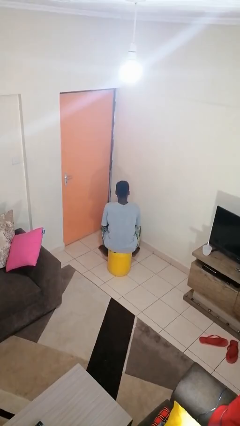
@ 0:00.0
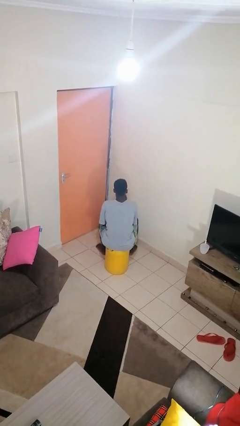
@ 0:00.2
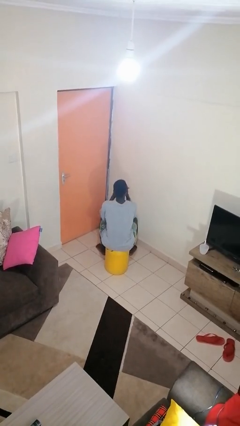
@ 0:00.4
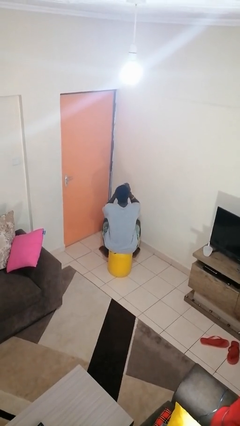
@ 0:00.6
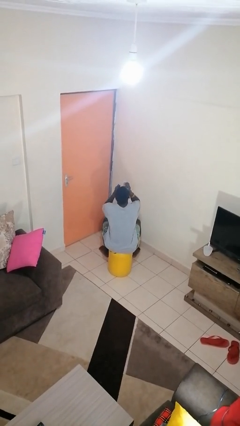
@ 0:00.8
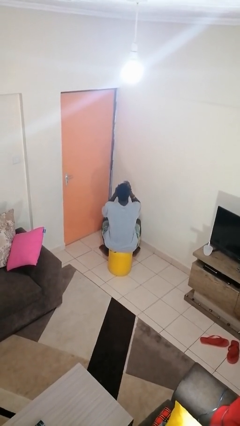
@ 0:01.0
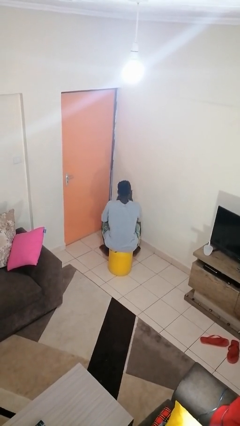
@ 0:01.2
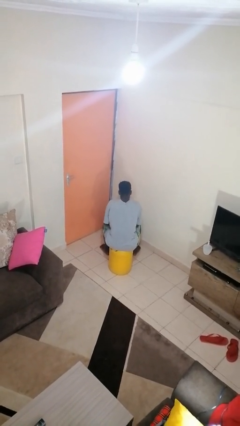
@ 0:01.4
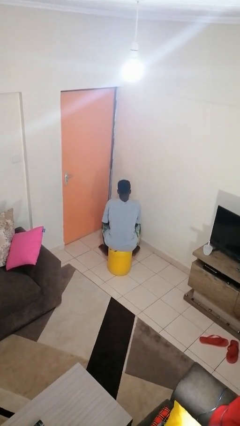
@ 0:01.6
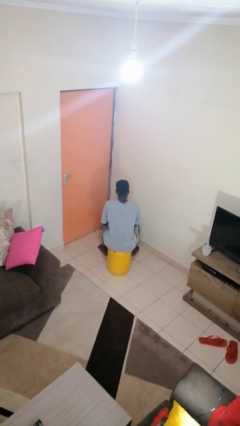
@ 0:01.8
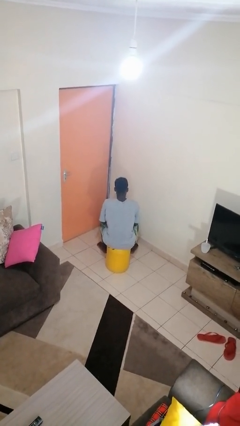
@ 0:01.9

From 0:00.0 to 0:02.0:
person drinks from mug

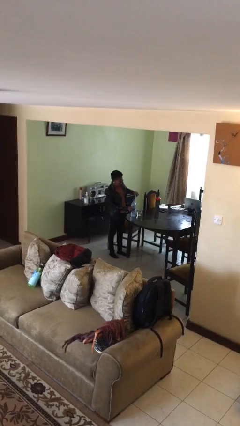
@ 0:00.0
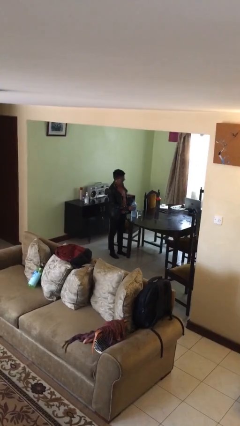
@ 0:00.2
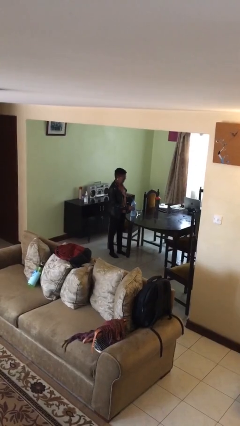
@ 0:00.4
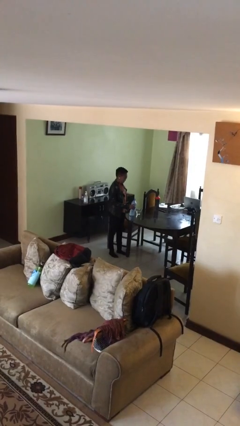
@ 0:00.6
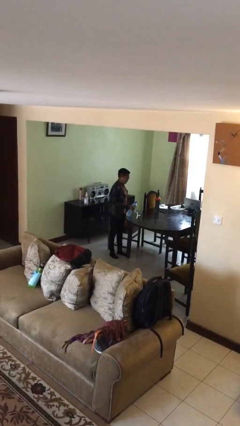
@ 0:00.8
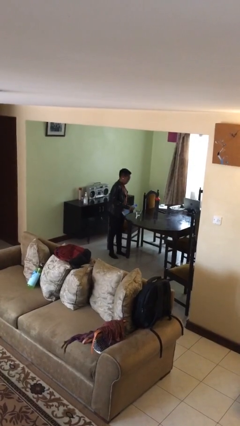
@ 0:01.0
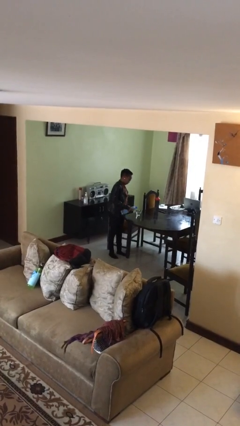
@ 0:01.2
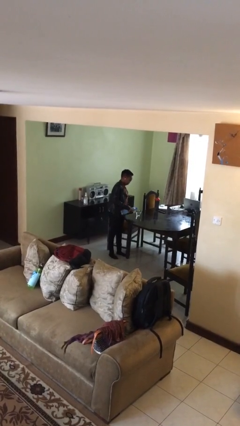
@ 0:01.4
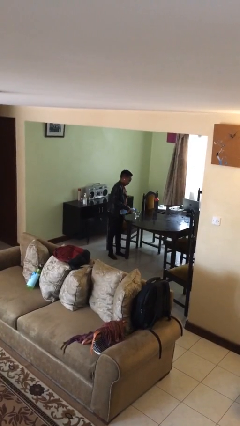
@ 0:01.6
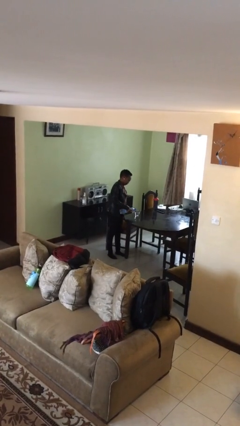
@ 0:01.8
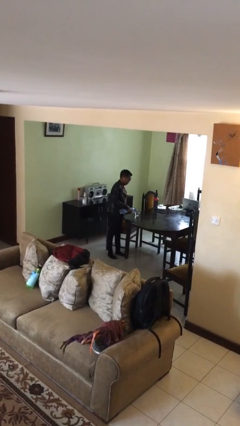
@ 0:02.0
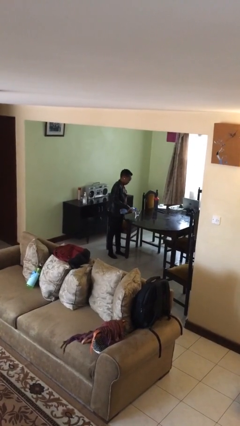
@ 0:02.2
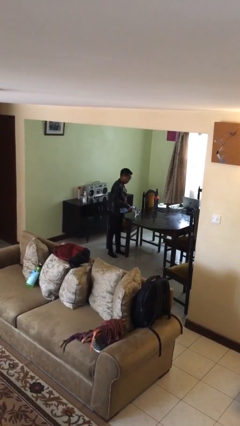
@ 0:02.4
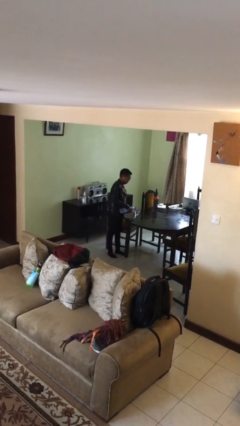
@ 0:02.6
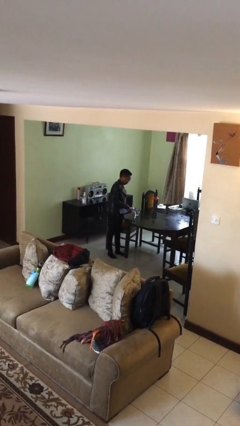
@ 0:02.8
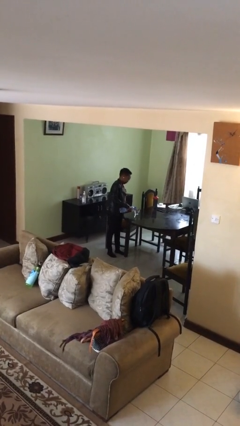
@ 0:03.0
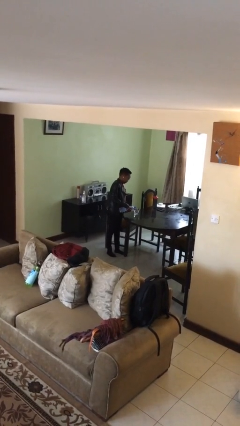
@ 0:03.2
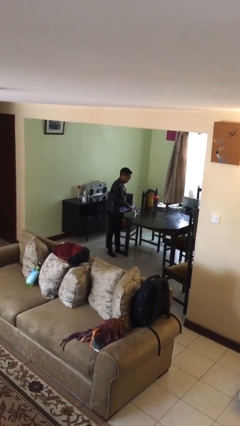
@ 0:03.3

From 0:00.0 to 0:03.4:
person pours liquid into cup

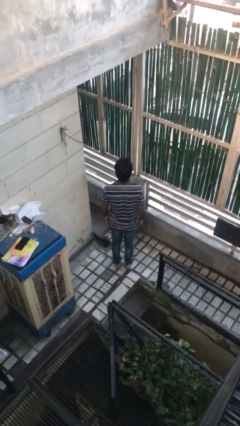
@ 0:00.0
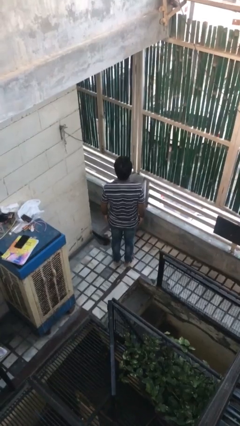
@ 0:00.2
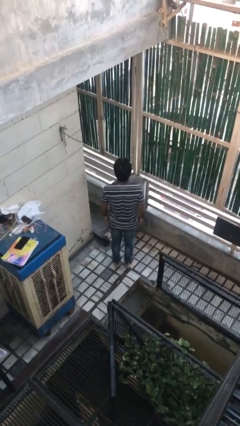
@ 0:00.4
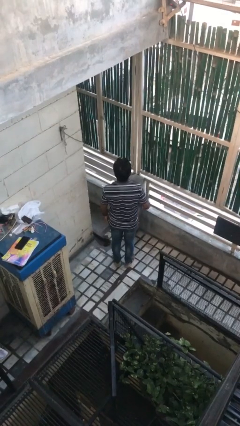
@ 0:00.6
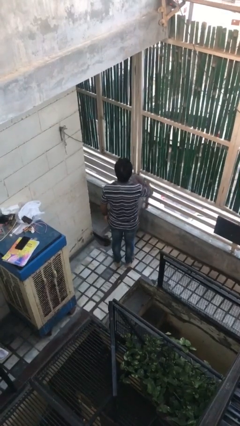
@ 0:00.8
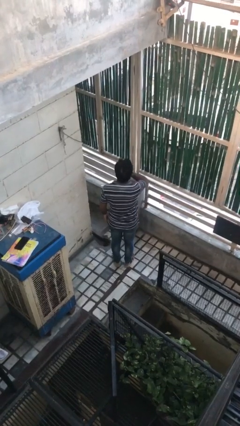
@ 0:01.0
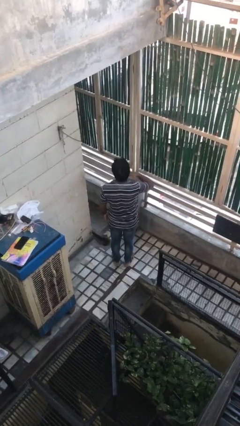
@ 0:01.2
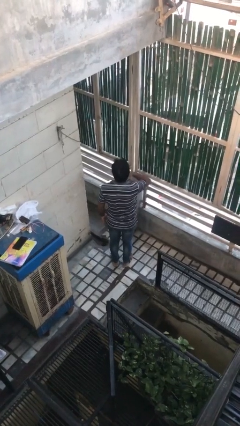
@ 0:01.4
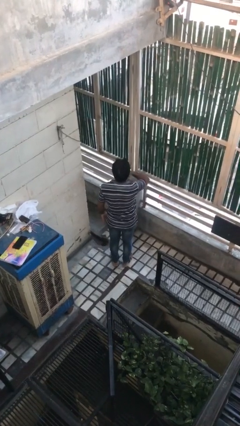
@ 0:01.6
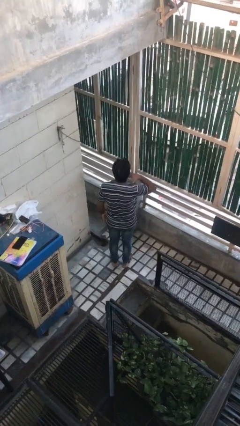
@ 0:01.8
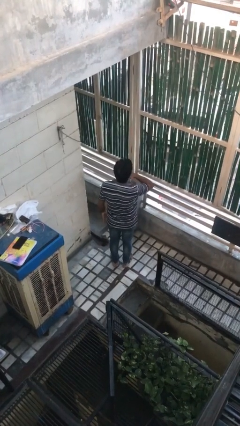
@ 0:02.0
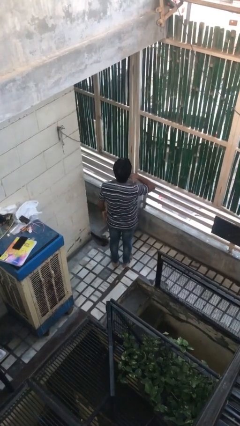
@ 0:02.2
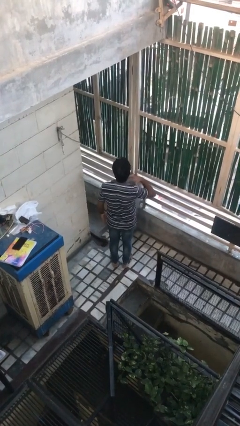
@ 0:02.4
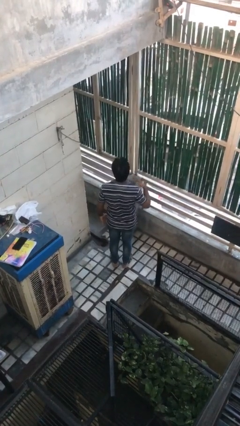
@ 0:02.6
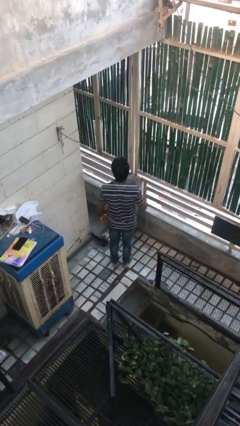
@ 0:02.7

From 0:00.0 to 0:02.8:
person gestures cut

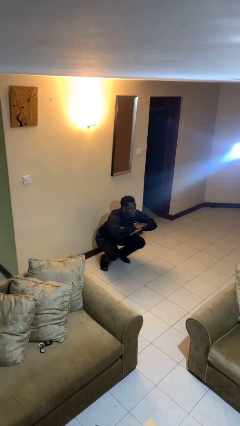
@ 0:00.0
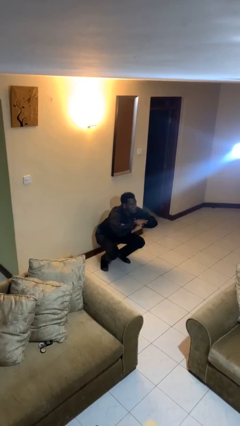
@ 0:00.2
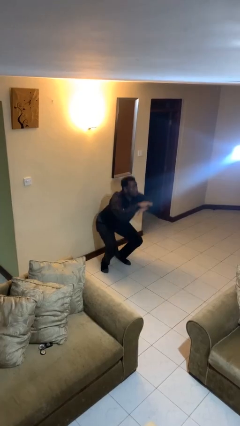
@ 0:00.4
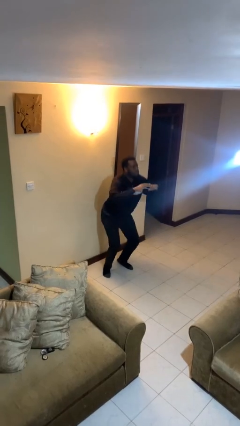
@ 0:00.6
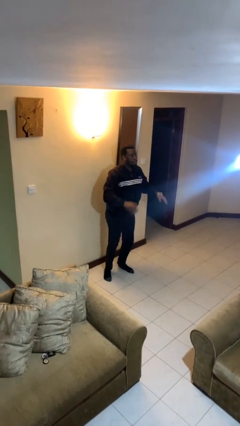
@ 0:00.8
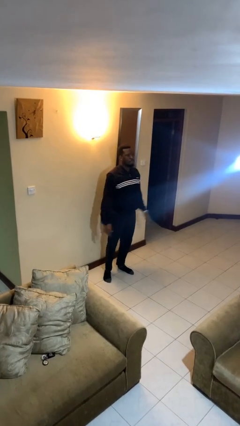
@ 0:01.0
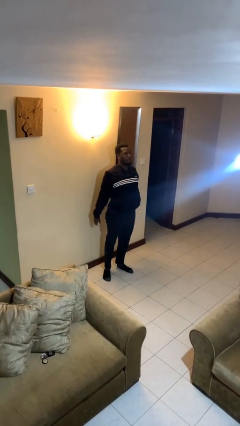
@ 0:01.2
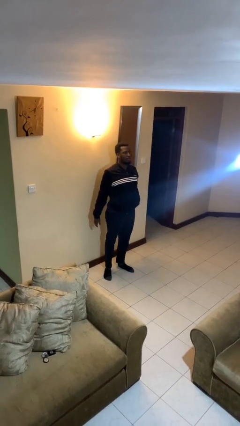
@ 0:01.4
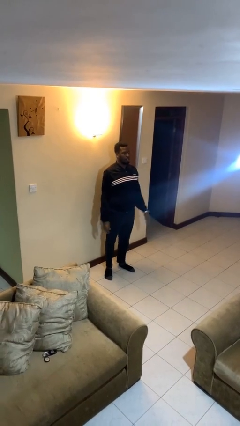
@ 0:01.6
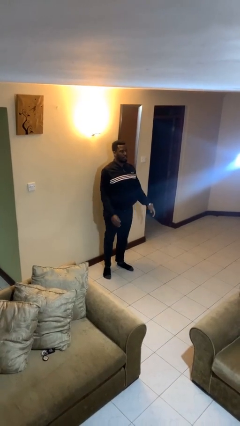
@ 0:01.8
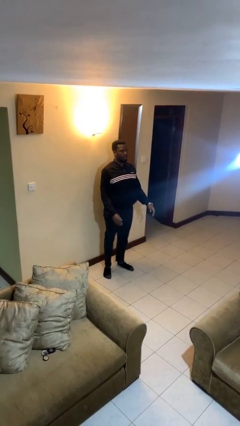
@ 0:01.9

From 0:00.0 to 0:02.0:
person stands up

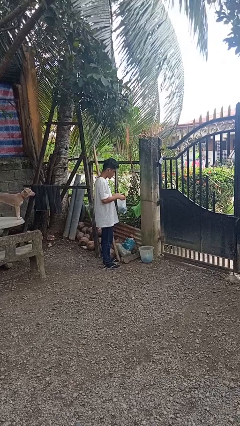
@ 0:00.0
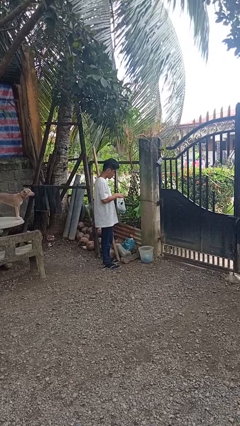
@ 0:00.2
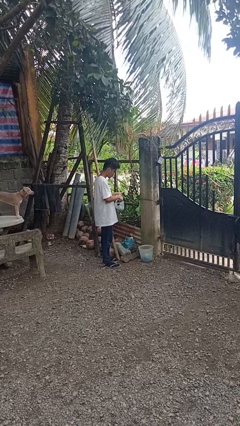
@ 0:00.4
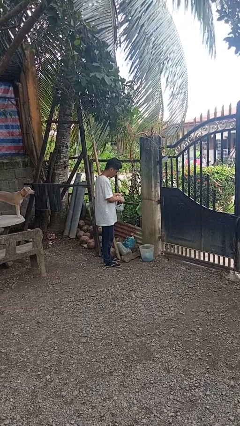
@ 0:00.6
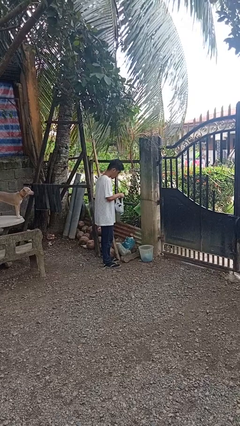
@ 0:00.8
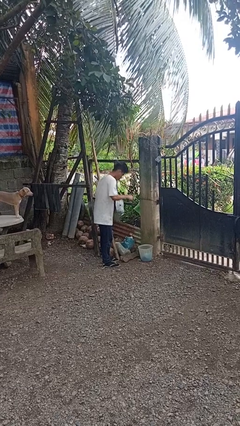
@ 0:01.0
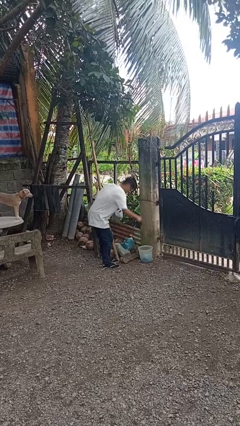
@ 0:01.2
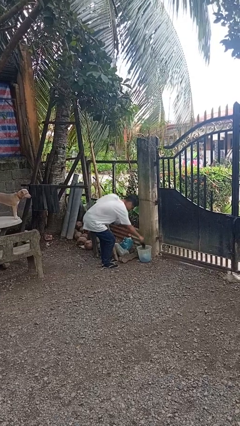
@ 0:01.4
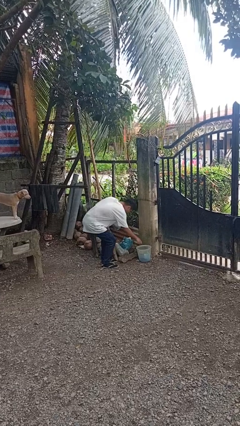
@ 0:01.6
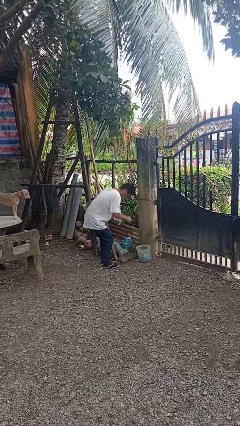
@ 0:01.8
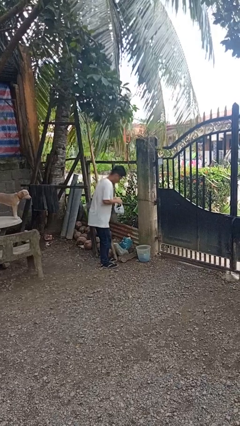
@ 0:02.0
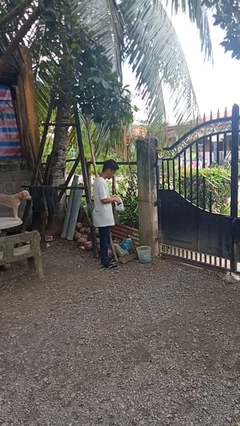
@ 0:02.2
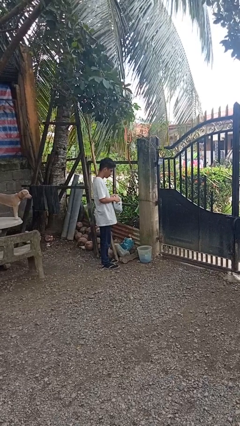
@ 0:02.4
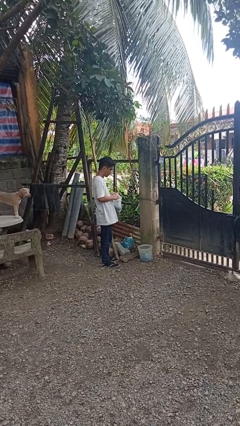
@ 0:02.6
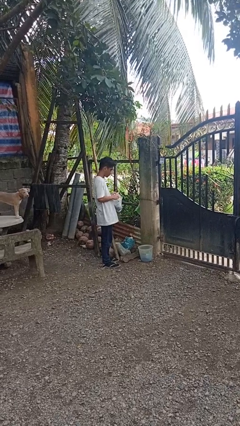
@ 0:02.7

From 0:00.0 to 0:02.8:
person discards trash

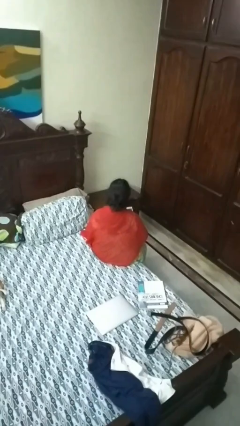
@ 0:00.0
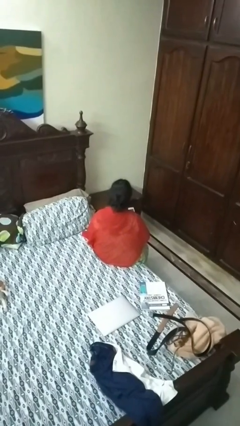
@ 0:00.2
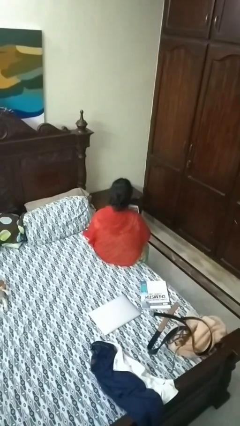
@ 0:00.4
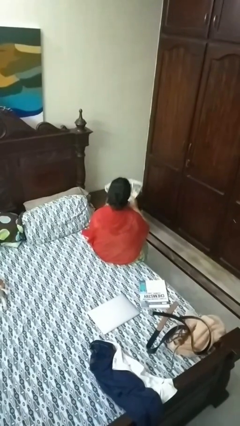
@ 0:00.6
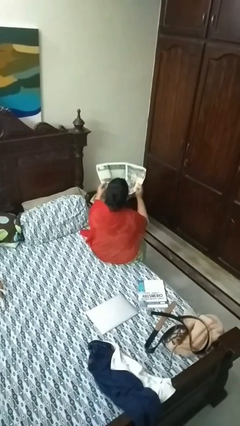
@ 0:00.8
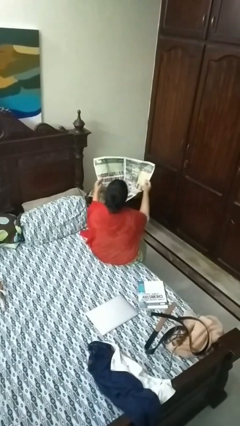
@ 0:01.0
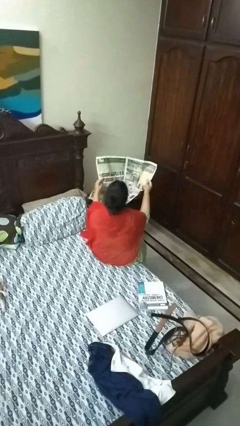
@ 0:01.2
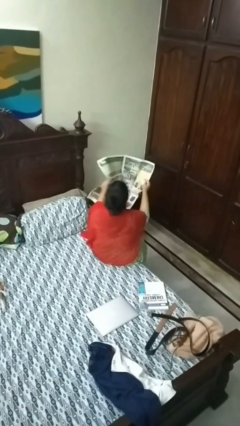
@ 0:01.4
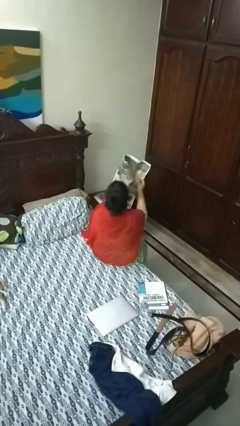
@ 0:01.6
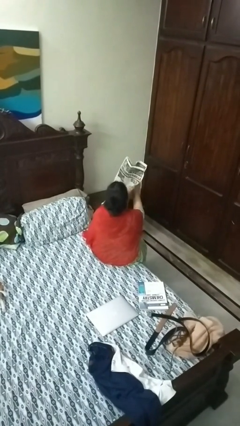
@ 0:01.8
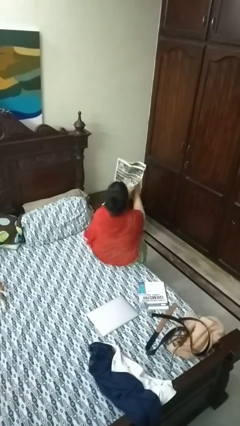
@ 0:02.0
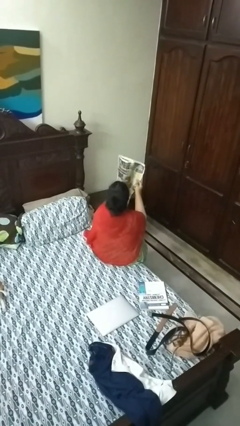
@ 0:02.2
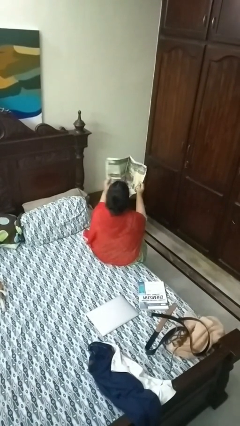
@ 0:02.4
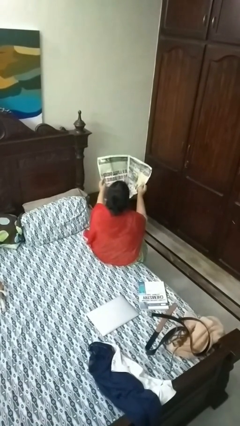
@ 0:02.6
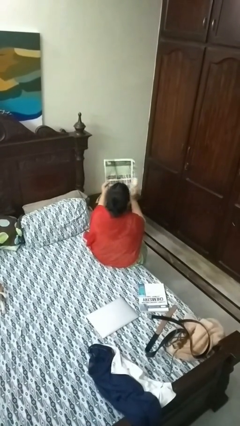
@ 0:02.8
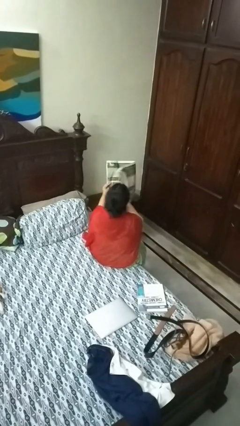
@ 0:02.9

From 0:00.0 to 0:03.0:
person reads newspaper

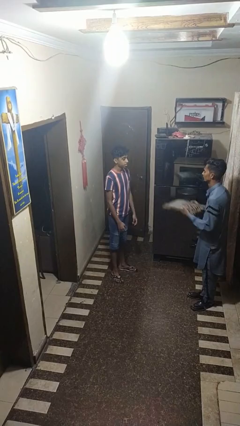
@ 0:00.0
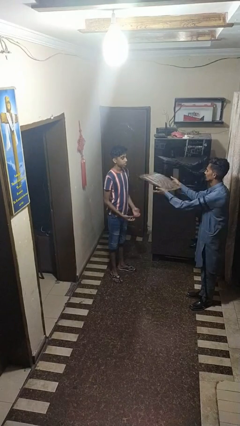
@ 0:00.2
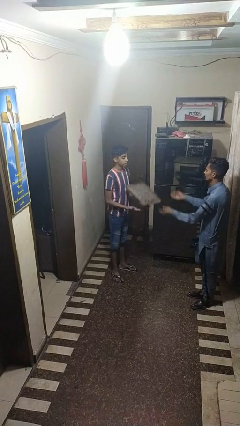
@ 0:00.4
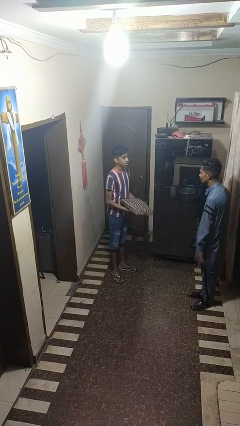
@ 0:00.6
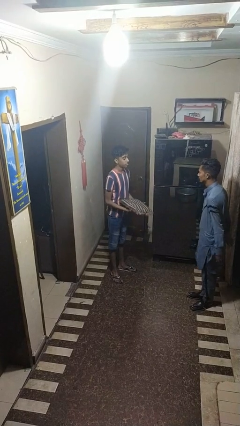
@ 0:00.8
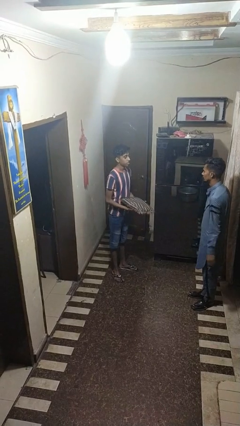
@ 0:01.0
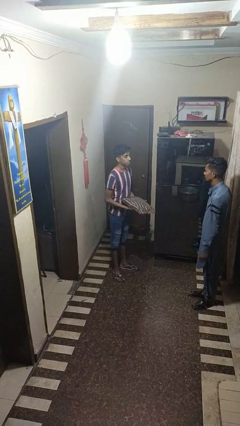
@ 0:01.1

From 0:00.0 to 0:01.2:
person catches object from person

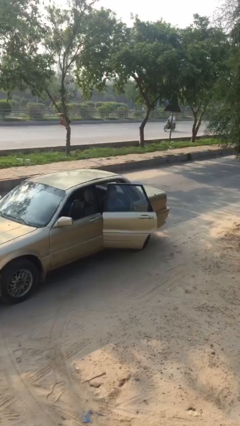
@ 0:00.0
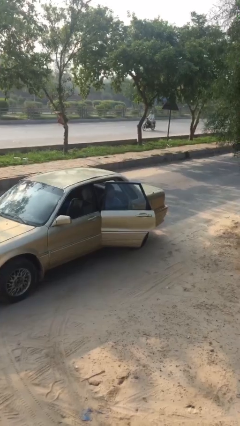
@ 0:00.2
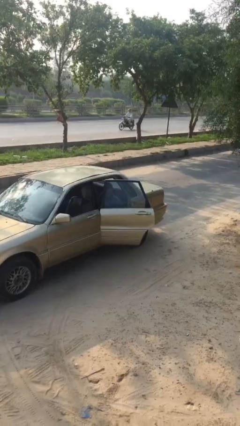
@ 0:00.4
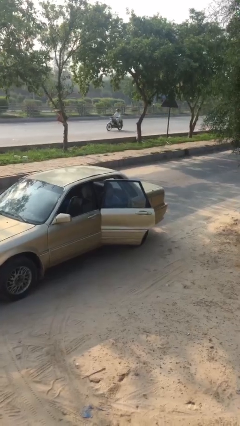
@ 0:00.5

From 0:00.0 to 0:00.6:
person closes car door
